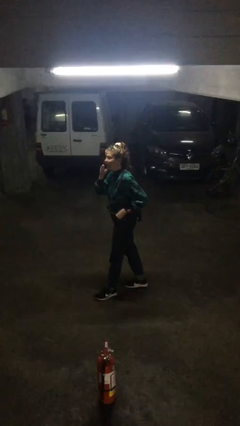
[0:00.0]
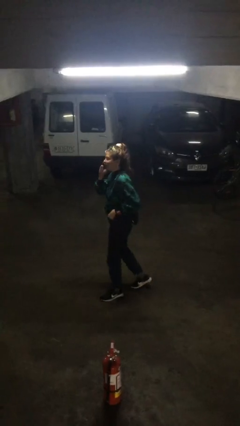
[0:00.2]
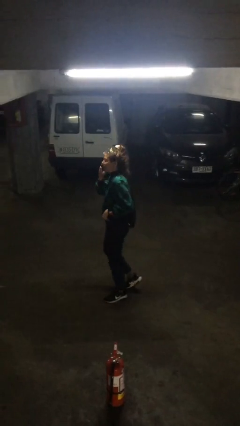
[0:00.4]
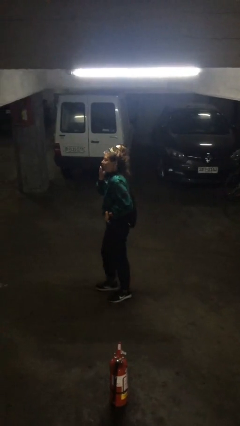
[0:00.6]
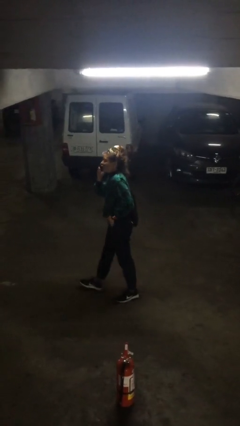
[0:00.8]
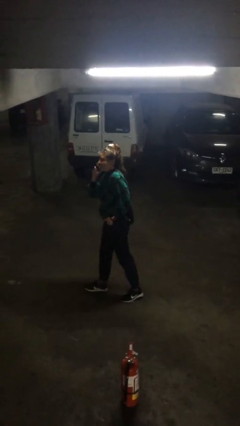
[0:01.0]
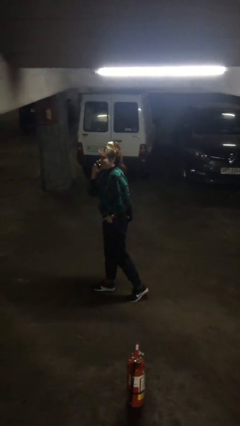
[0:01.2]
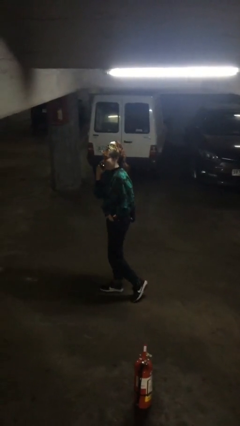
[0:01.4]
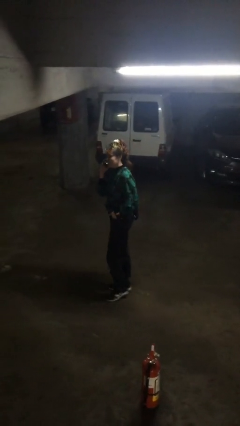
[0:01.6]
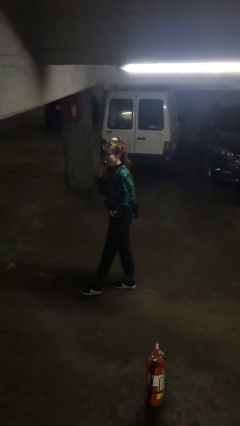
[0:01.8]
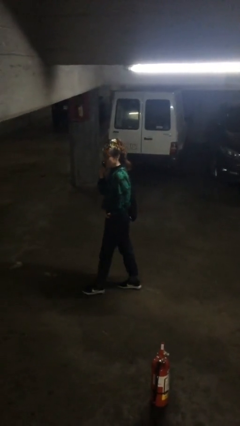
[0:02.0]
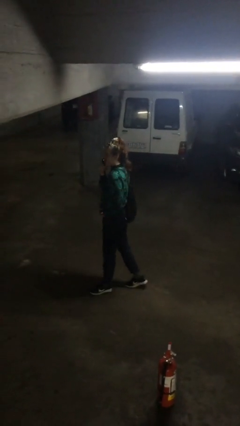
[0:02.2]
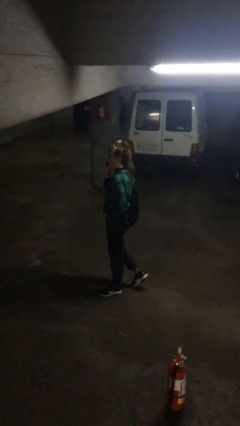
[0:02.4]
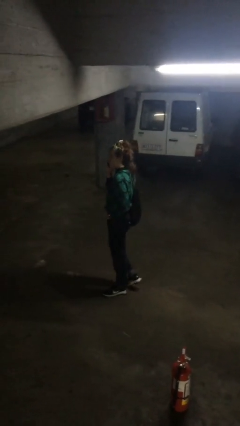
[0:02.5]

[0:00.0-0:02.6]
person talks on phone

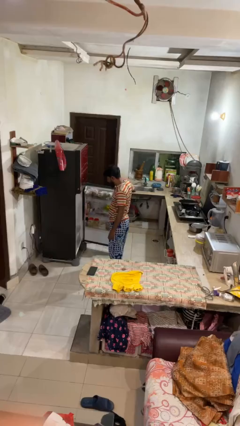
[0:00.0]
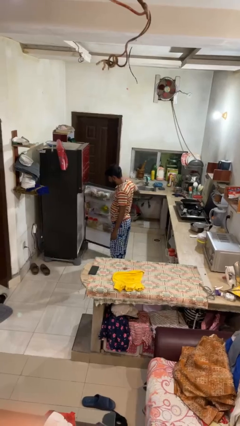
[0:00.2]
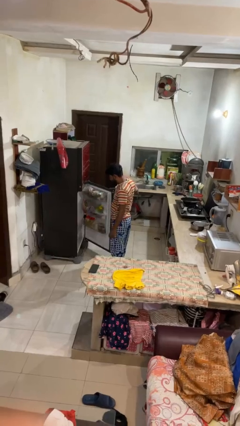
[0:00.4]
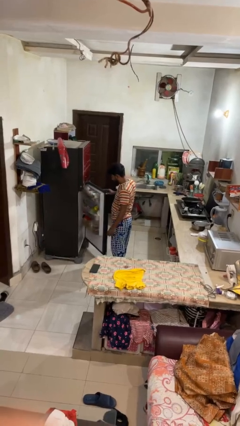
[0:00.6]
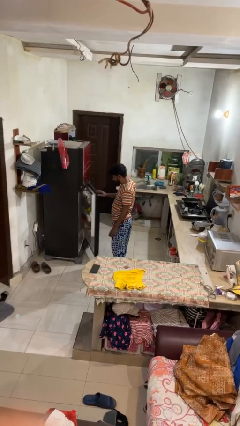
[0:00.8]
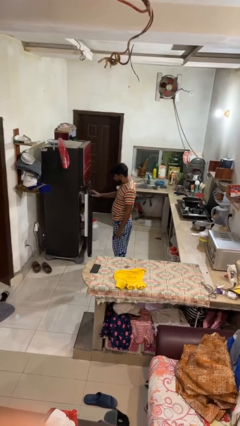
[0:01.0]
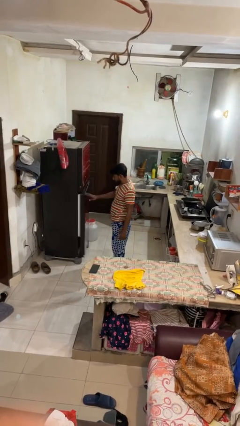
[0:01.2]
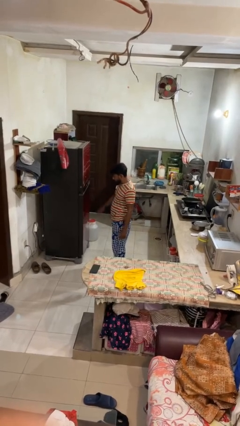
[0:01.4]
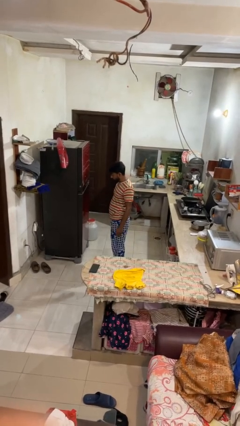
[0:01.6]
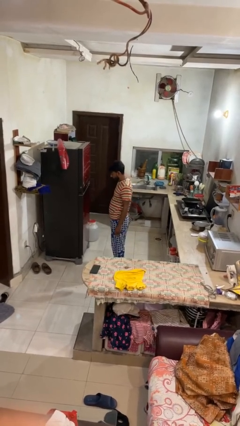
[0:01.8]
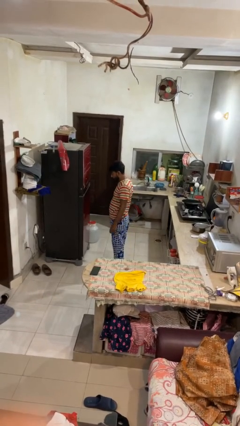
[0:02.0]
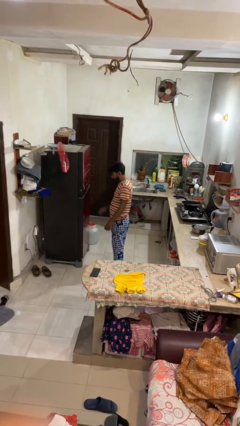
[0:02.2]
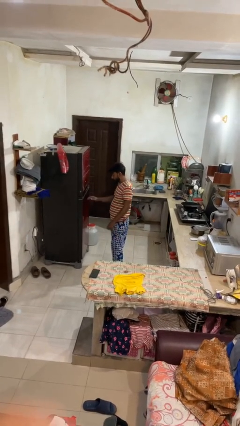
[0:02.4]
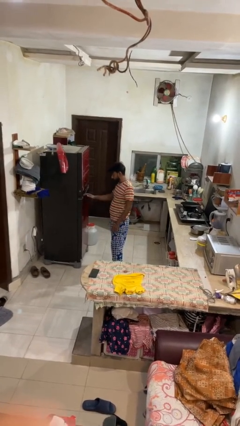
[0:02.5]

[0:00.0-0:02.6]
person closes refrigerator

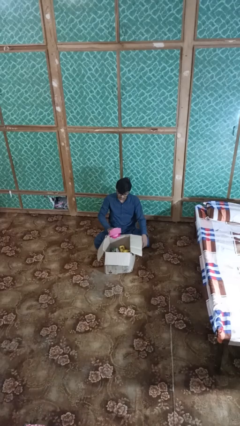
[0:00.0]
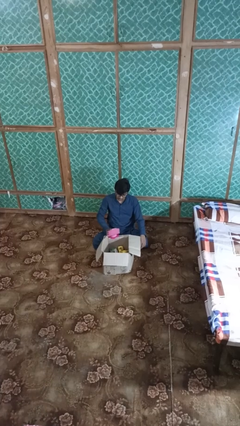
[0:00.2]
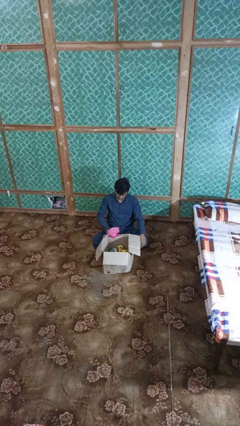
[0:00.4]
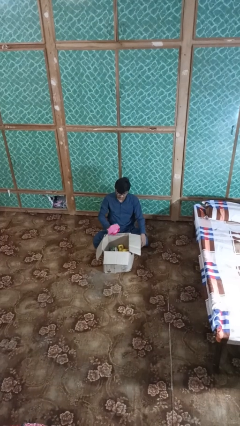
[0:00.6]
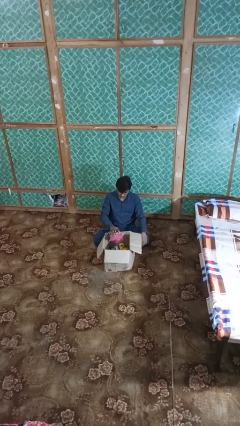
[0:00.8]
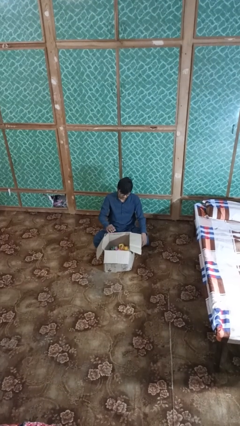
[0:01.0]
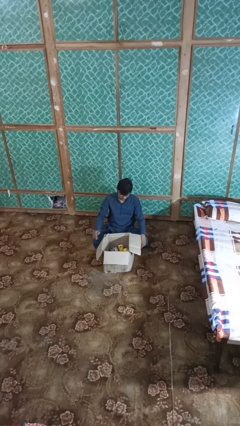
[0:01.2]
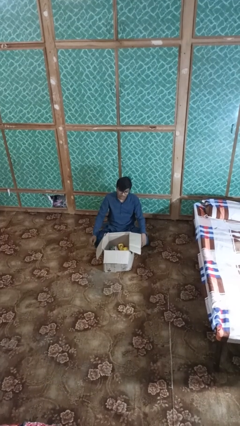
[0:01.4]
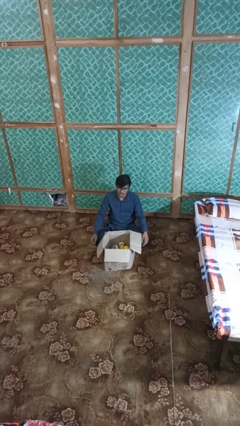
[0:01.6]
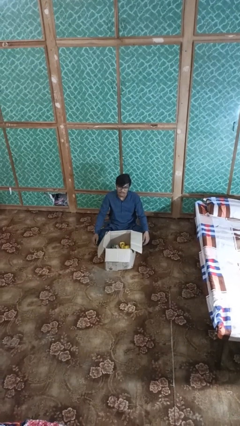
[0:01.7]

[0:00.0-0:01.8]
person puts object into box

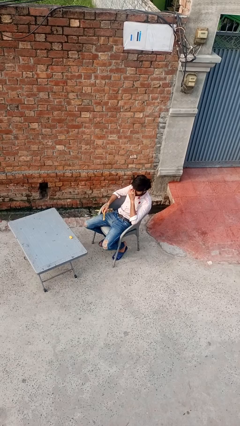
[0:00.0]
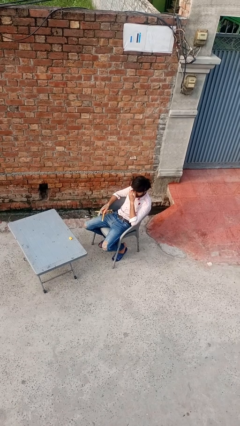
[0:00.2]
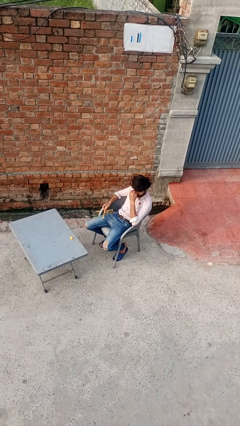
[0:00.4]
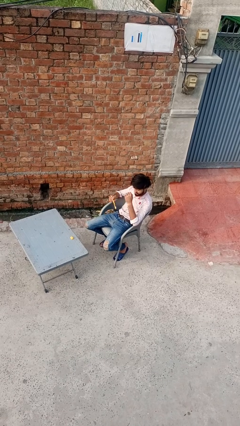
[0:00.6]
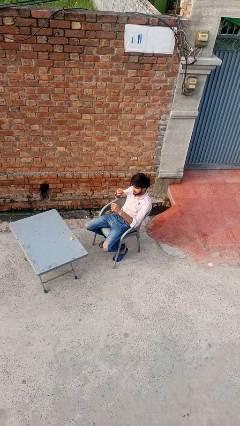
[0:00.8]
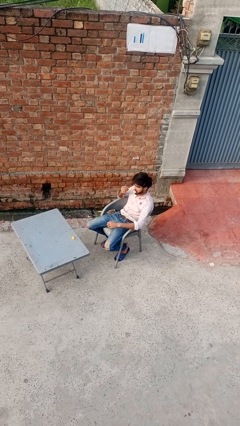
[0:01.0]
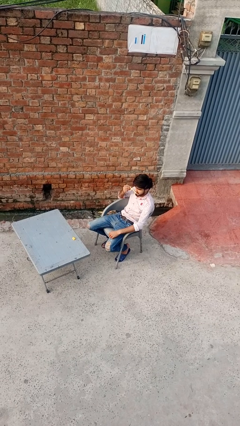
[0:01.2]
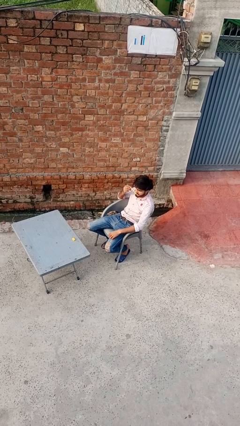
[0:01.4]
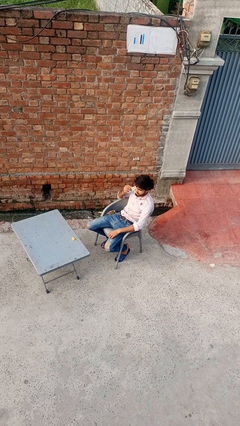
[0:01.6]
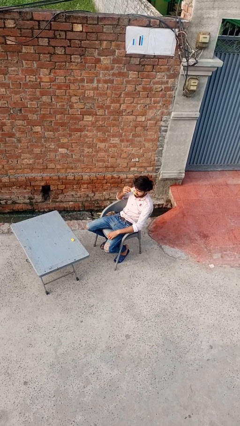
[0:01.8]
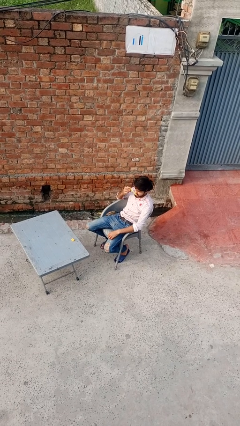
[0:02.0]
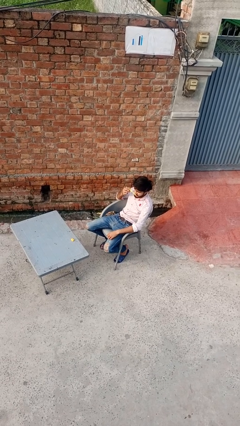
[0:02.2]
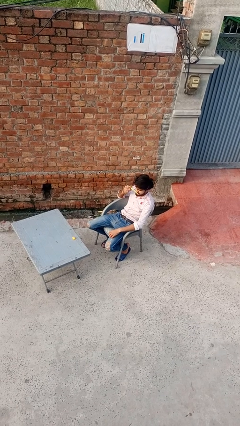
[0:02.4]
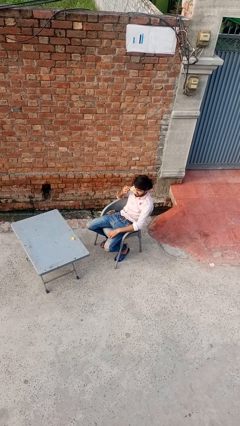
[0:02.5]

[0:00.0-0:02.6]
person brushes teeth

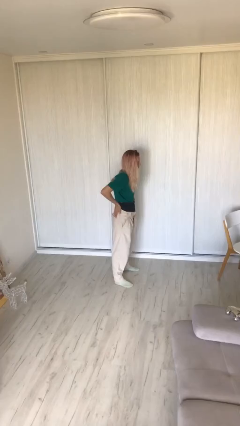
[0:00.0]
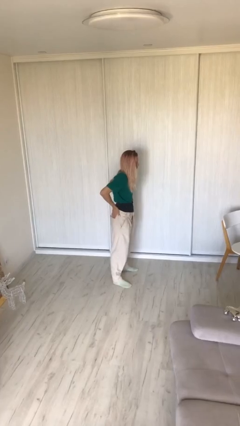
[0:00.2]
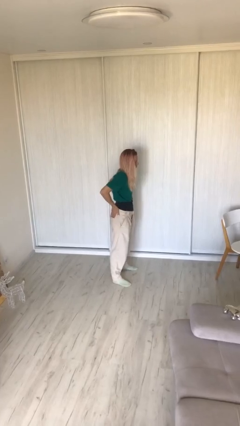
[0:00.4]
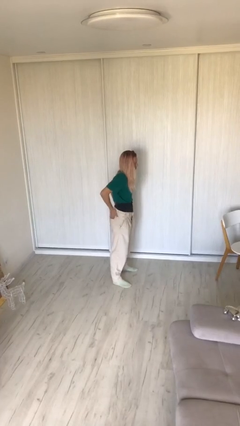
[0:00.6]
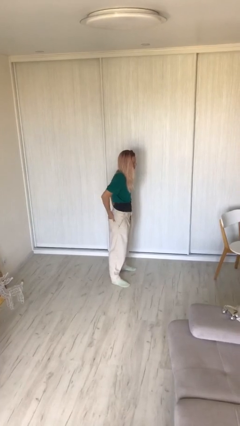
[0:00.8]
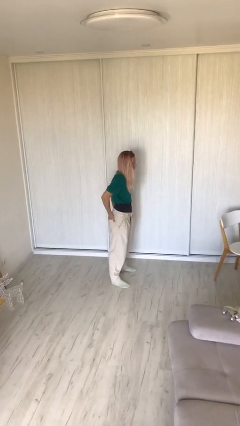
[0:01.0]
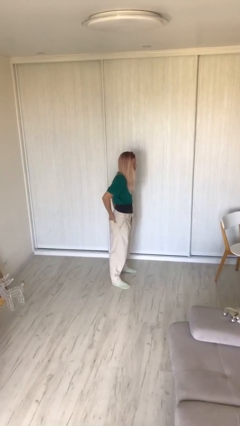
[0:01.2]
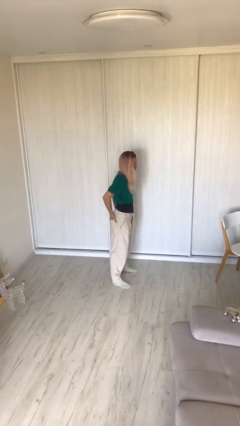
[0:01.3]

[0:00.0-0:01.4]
person puts hands in back pockets

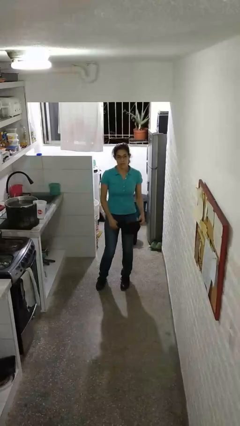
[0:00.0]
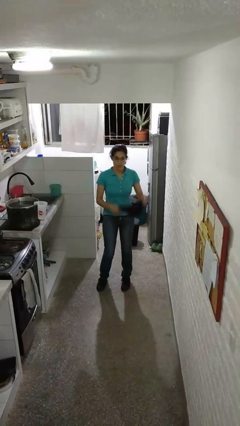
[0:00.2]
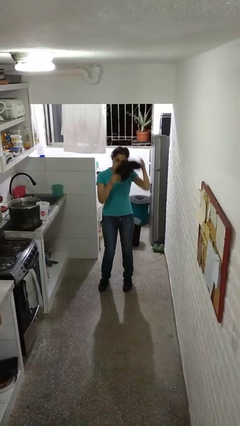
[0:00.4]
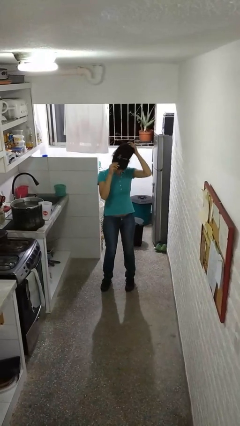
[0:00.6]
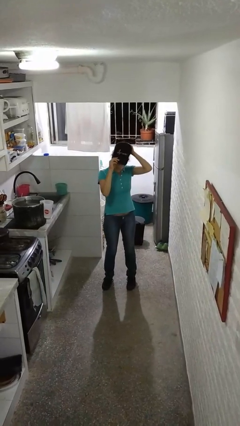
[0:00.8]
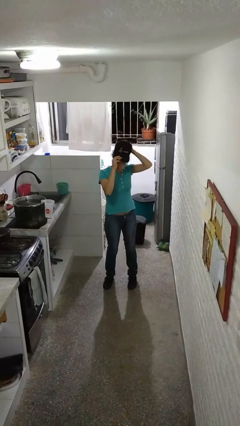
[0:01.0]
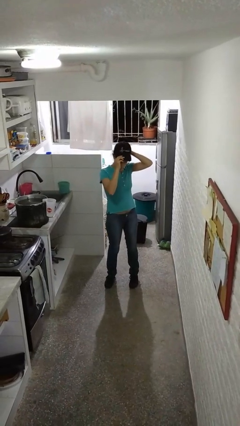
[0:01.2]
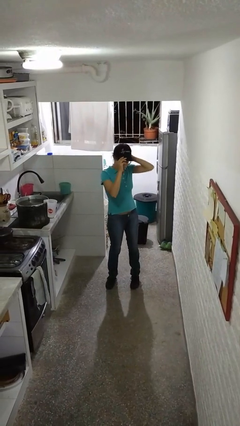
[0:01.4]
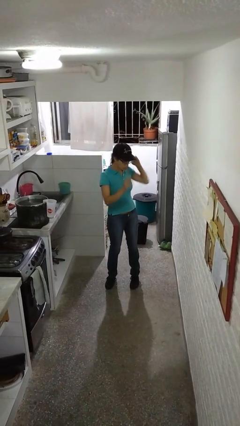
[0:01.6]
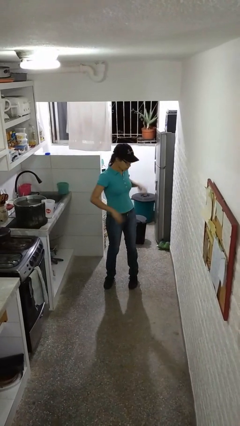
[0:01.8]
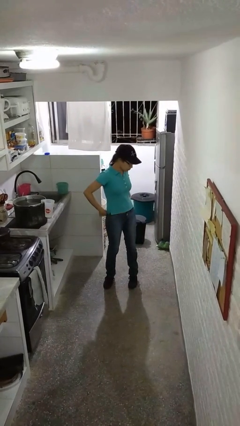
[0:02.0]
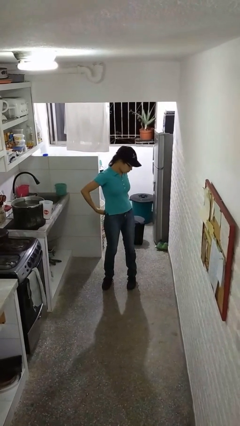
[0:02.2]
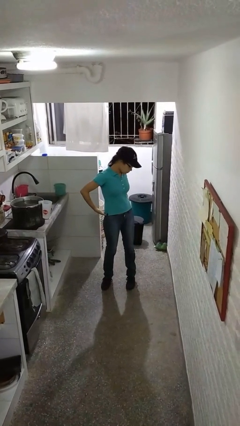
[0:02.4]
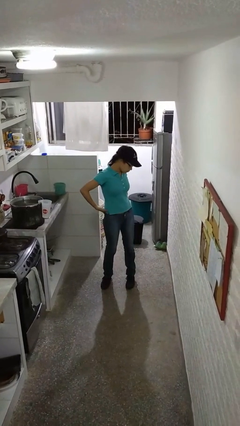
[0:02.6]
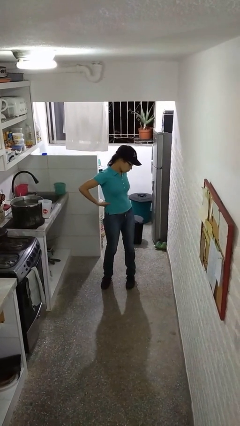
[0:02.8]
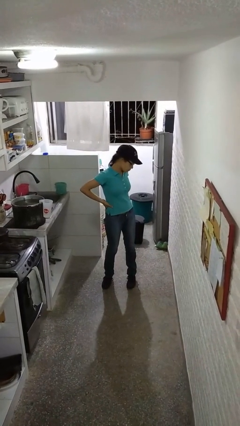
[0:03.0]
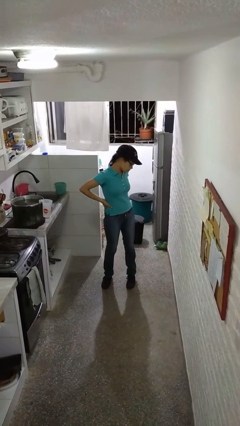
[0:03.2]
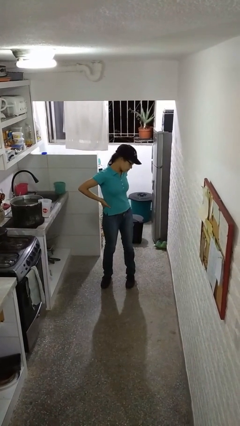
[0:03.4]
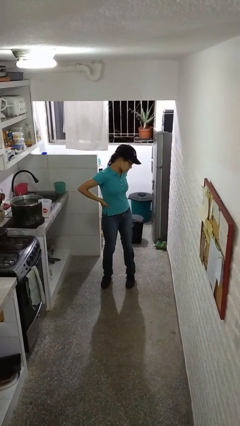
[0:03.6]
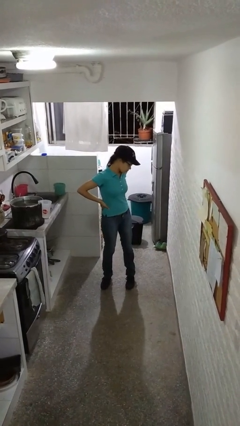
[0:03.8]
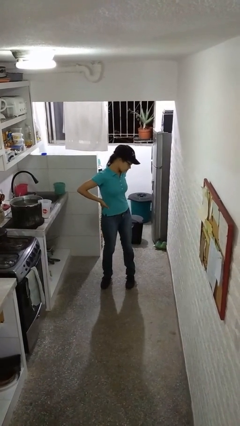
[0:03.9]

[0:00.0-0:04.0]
person puts on hat

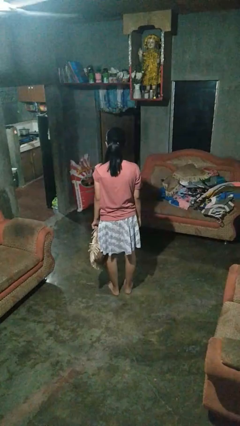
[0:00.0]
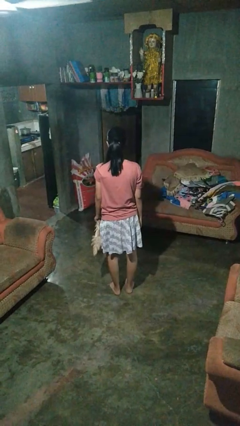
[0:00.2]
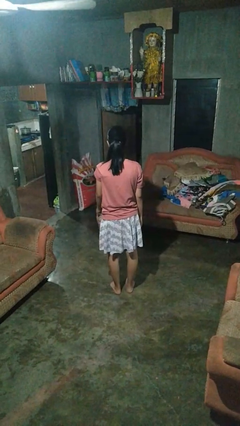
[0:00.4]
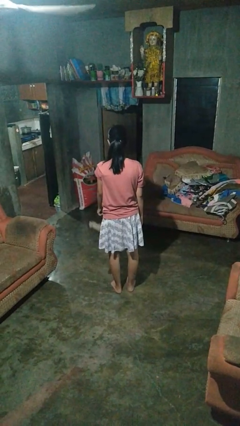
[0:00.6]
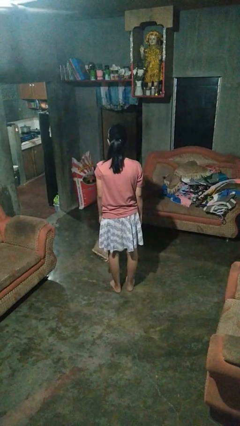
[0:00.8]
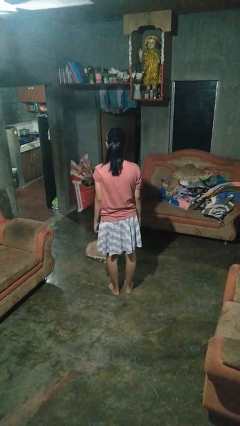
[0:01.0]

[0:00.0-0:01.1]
person throws object to ground

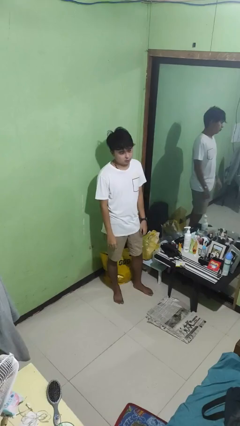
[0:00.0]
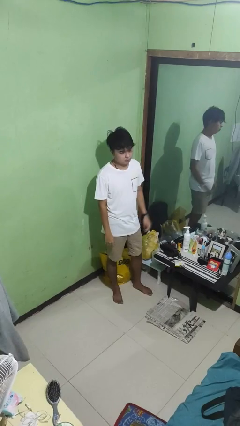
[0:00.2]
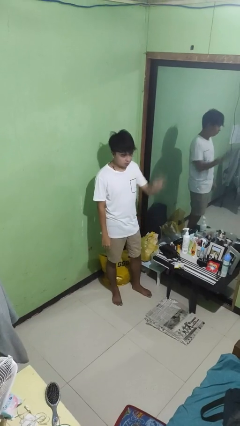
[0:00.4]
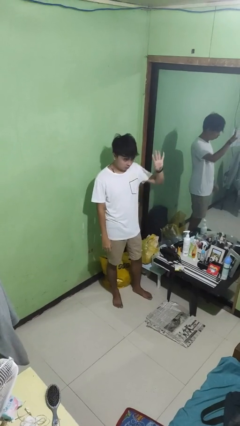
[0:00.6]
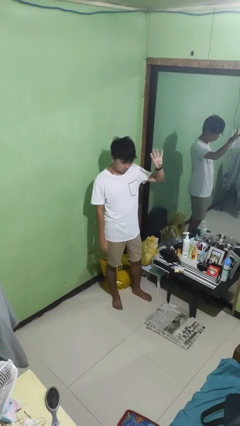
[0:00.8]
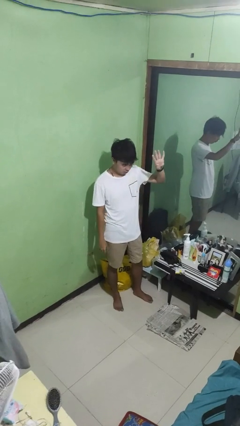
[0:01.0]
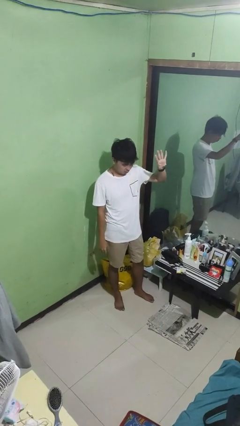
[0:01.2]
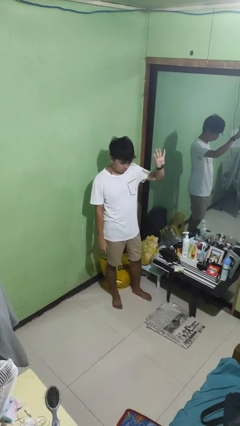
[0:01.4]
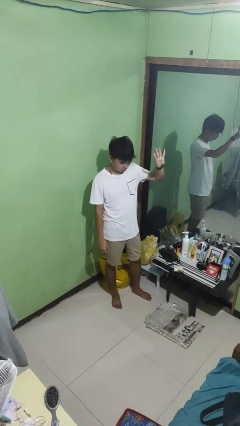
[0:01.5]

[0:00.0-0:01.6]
person gestures number four
